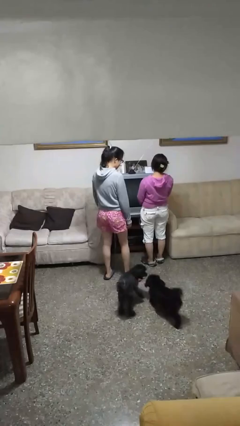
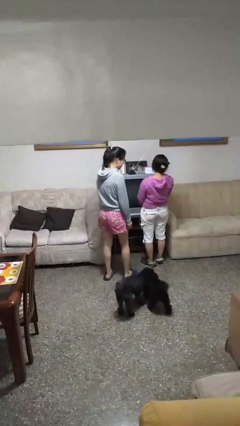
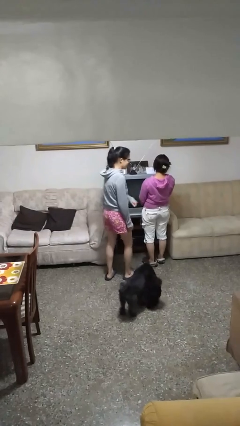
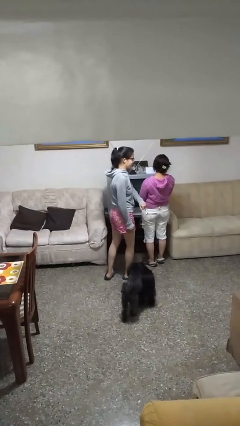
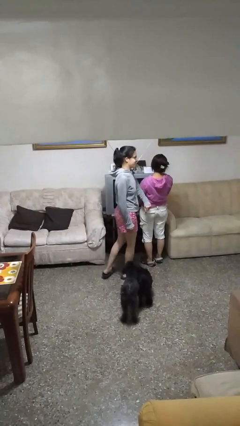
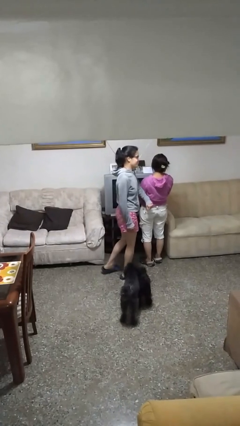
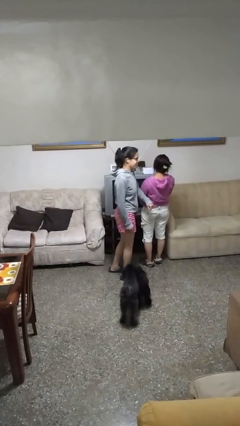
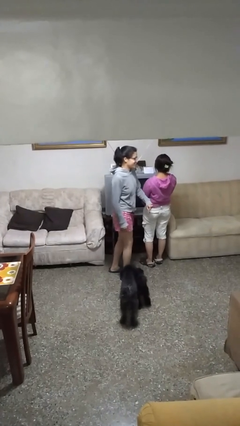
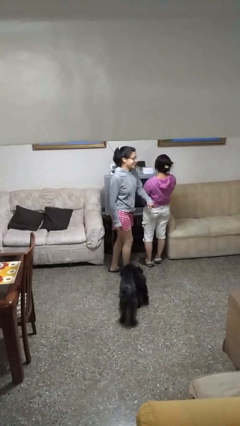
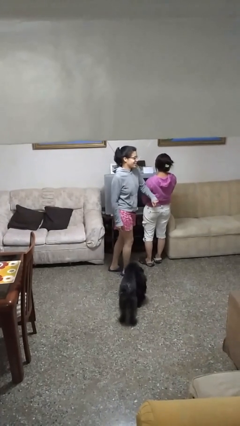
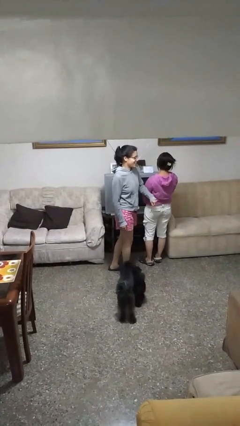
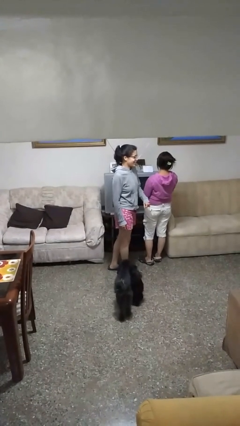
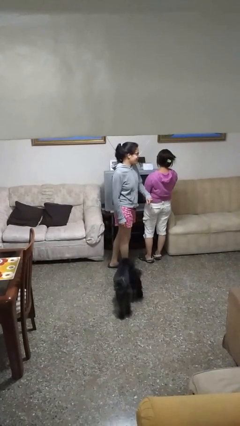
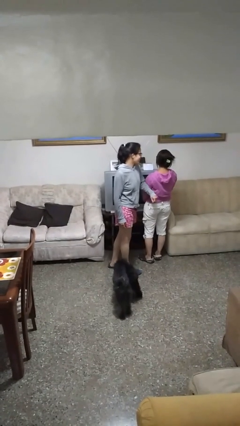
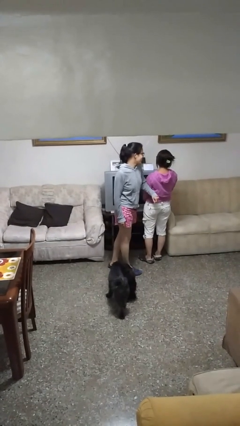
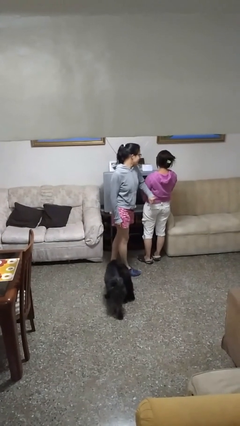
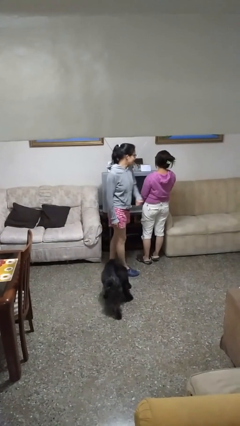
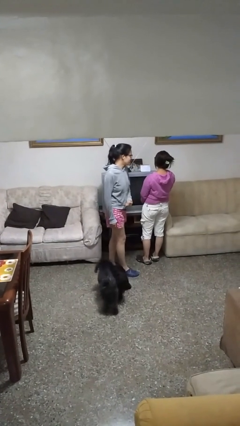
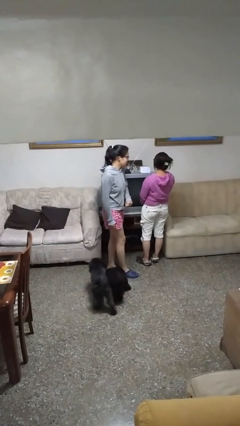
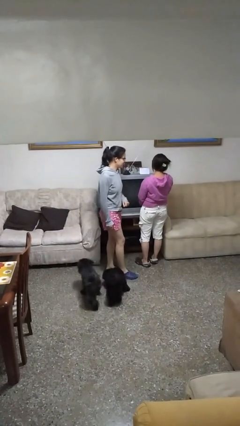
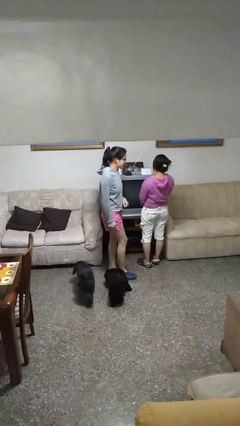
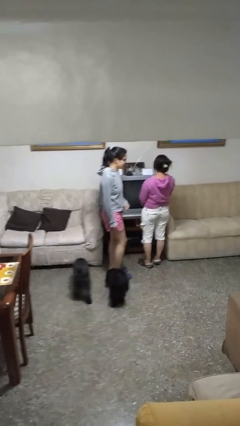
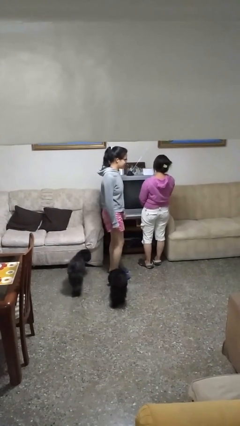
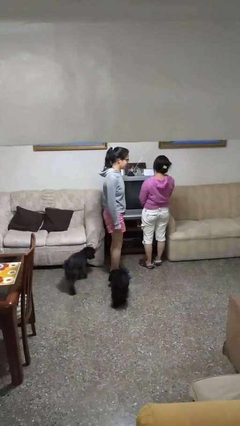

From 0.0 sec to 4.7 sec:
person nudges person with elbow

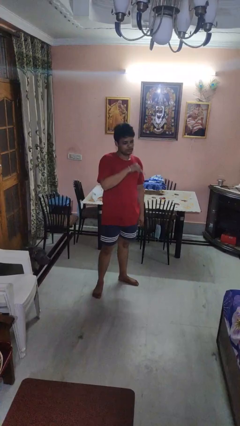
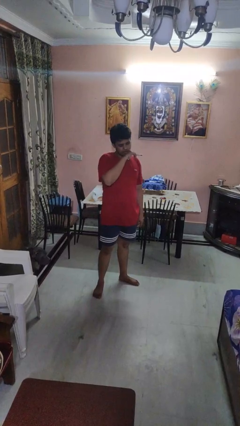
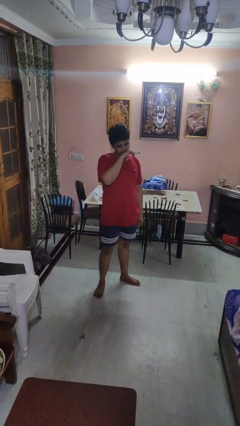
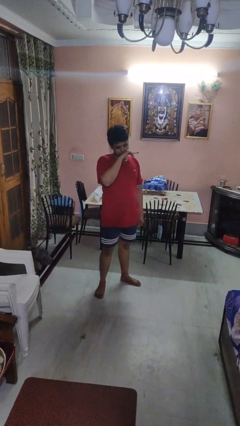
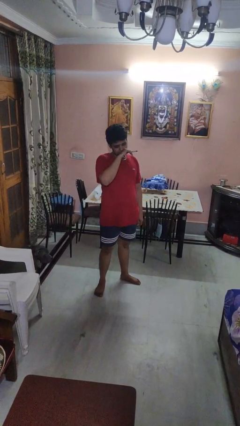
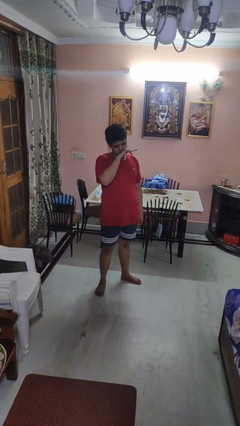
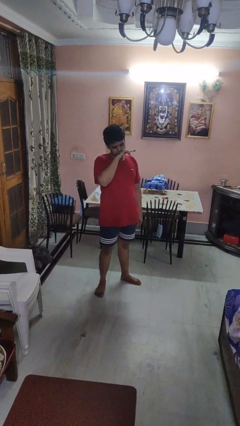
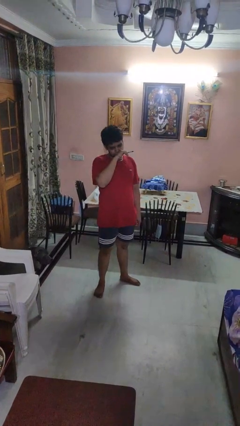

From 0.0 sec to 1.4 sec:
person vapes

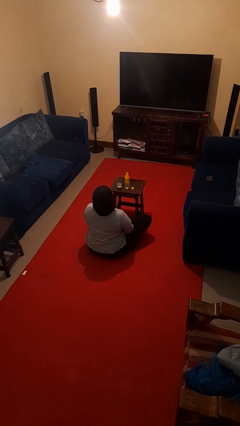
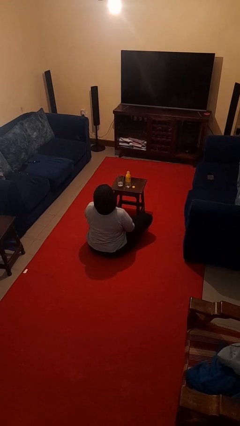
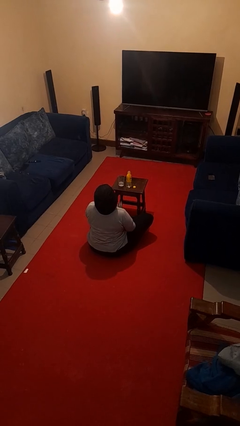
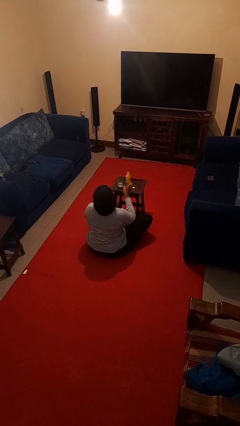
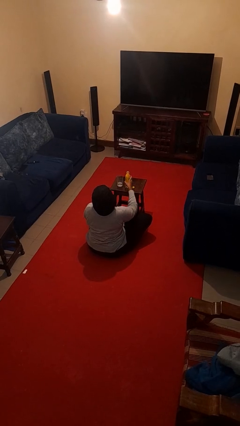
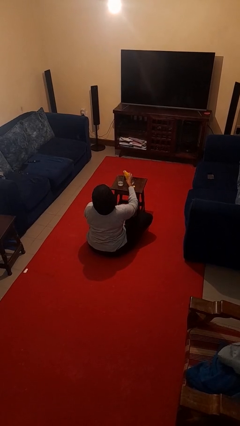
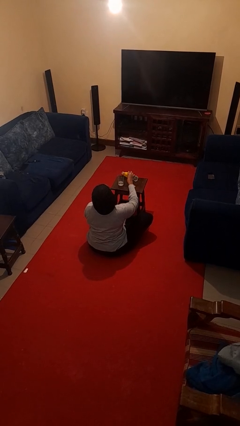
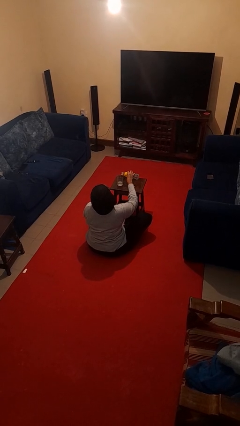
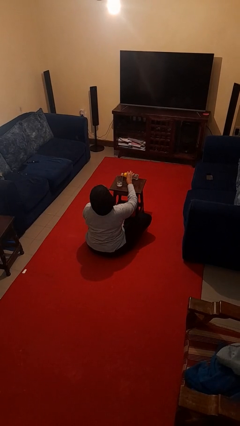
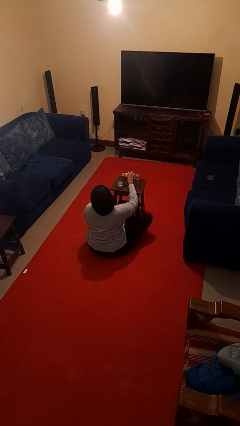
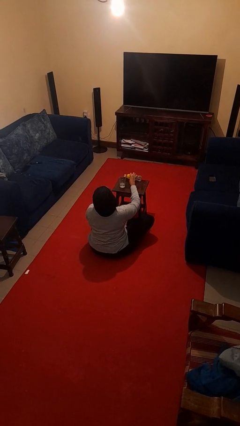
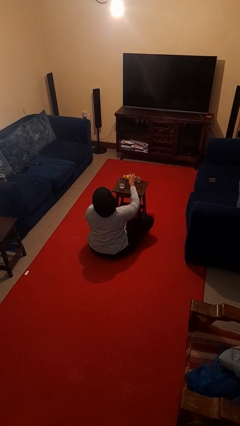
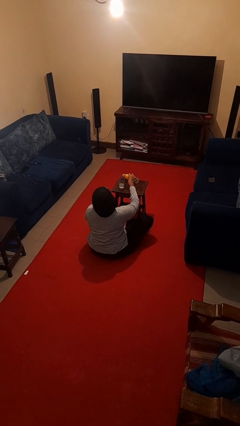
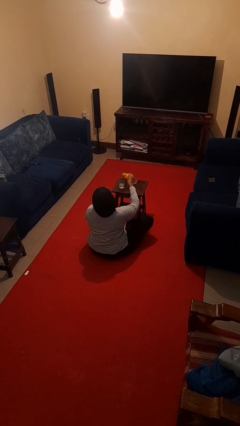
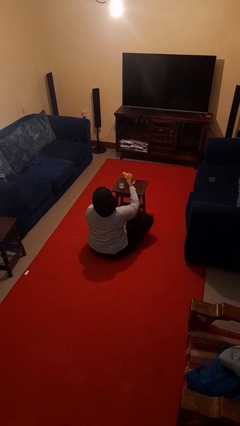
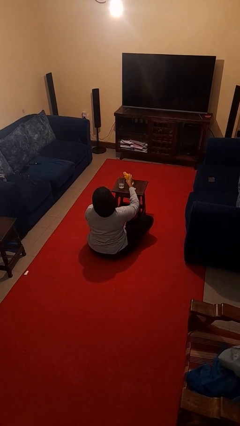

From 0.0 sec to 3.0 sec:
person pours liquid into cup

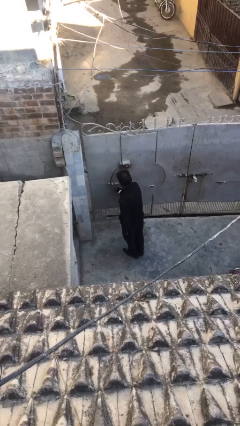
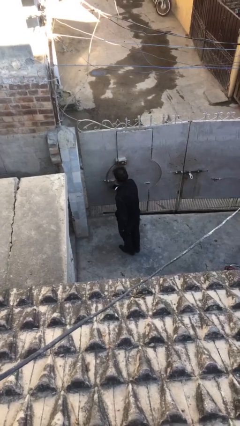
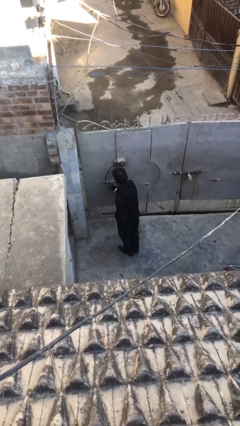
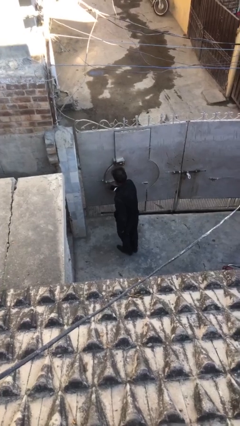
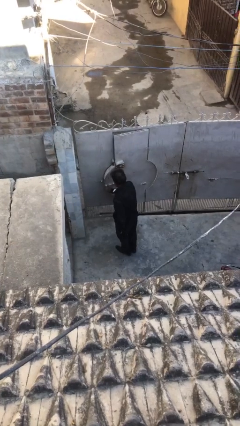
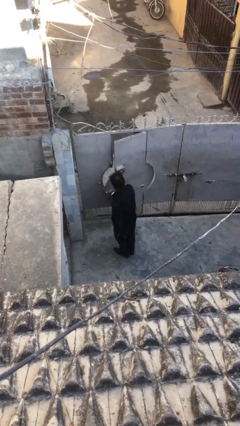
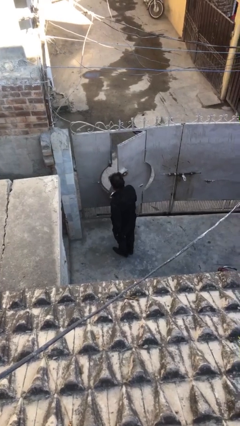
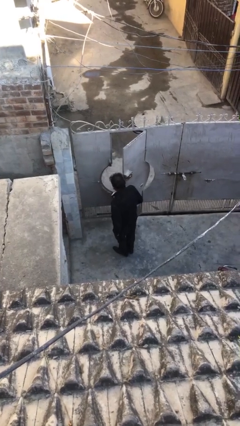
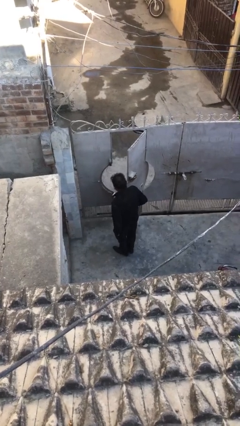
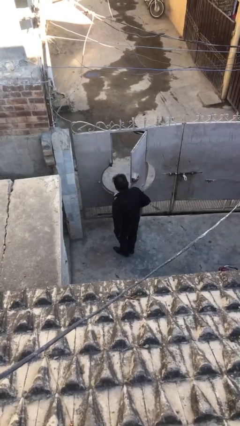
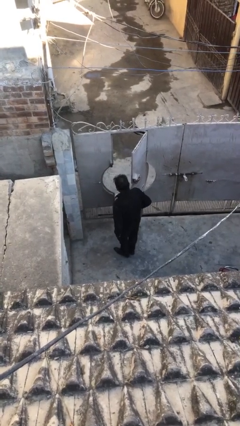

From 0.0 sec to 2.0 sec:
person opens facility door

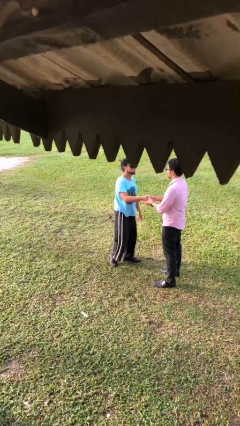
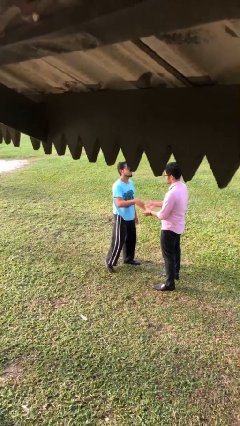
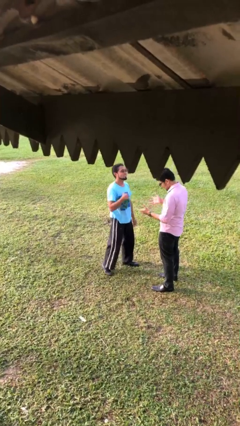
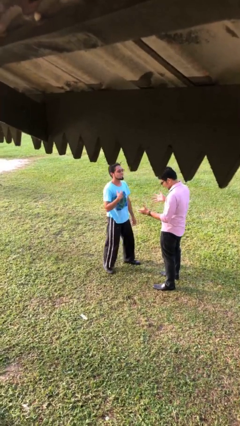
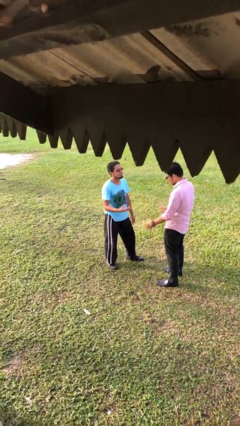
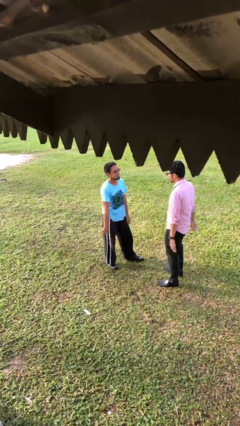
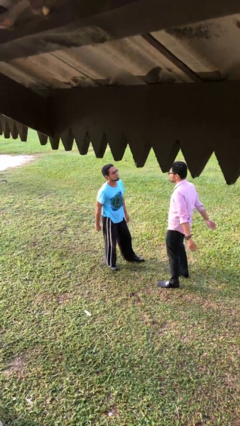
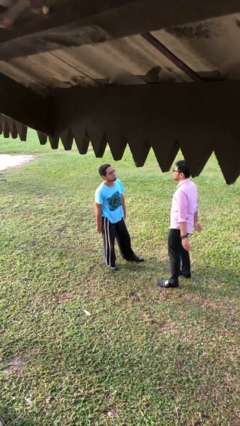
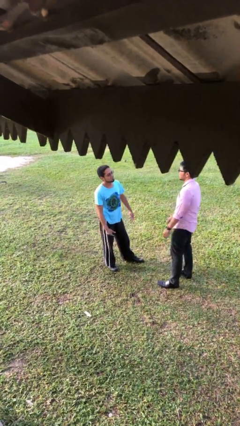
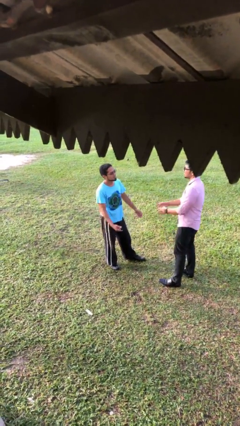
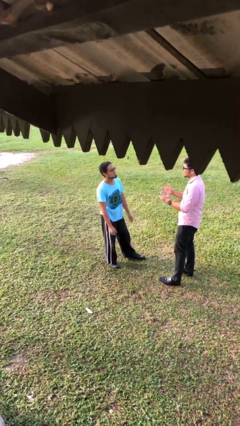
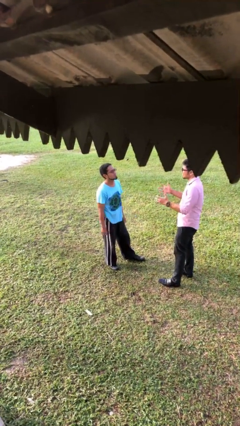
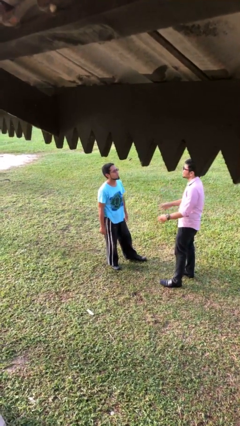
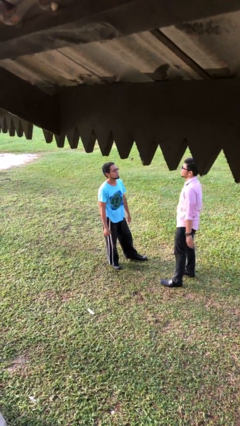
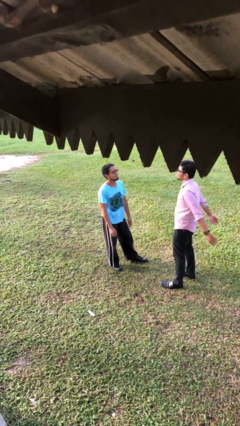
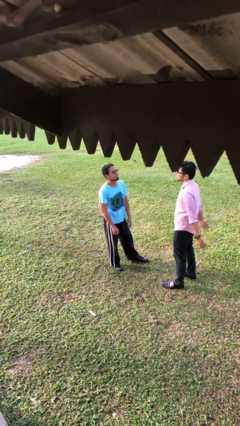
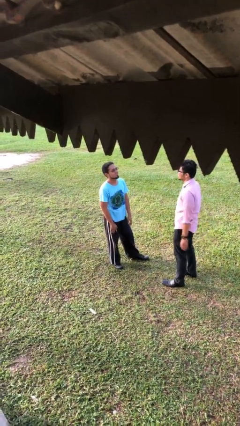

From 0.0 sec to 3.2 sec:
person talks to person

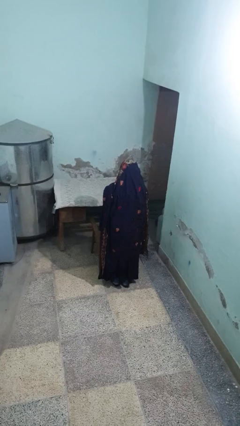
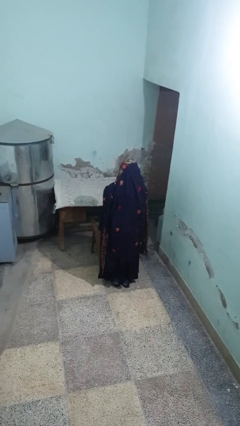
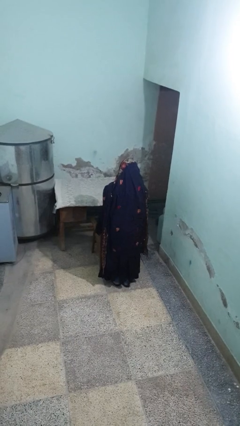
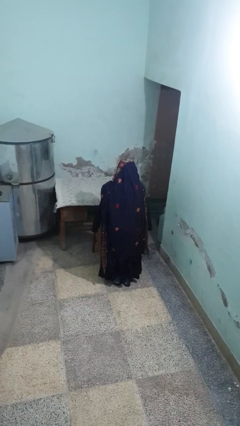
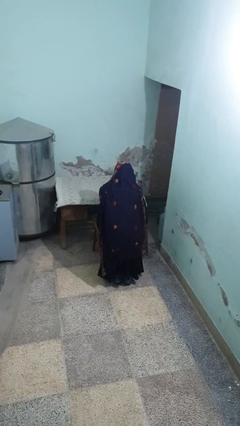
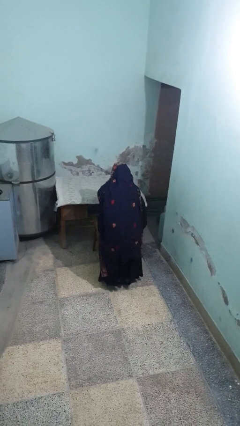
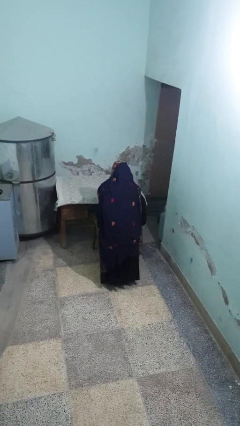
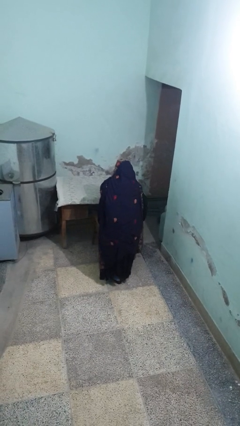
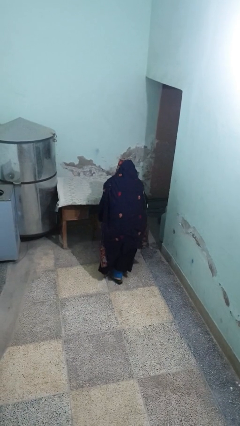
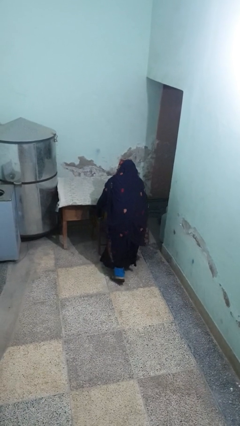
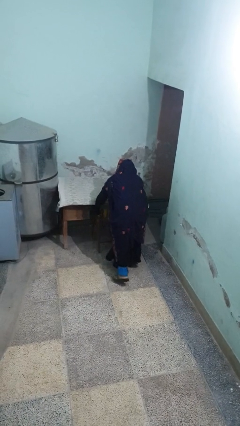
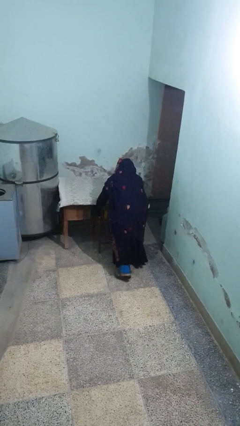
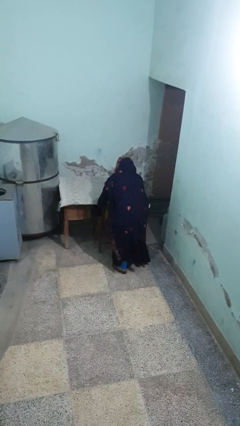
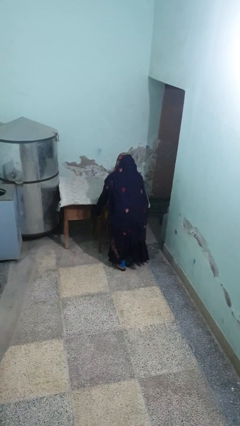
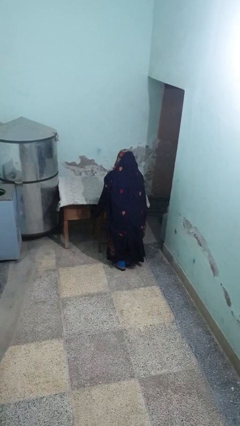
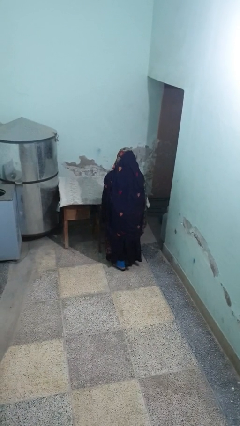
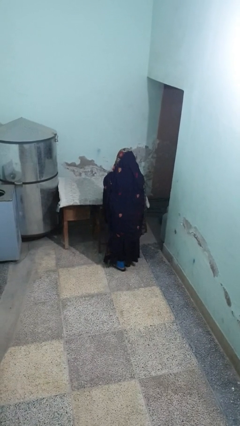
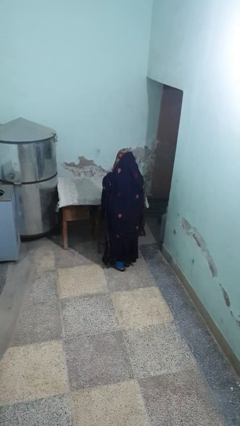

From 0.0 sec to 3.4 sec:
person pushes in chair
